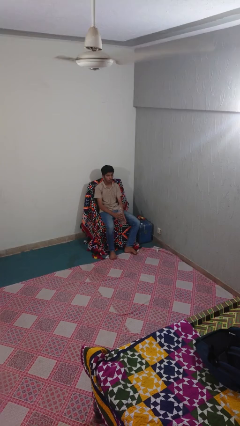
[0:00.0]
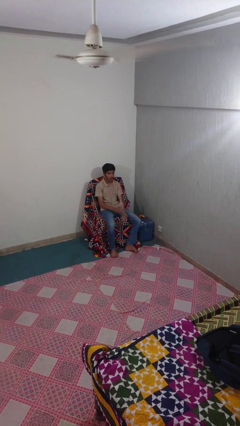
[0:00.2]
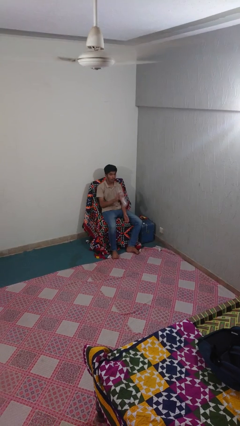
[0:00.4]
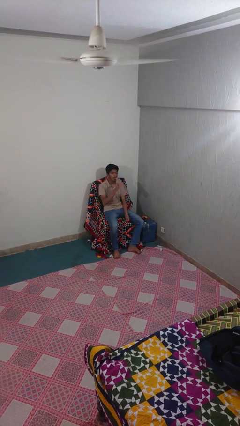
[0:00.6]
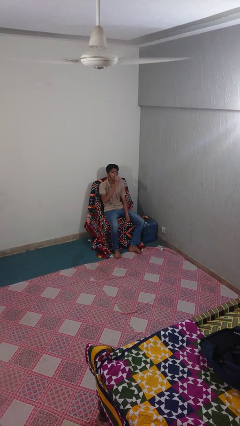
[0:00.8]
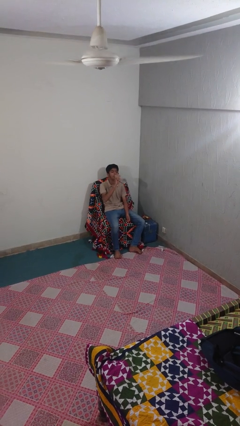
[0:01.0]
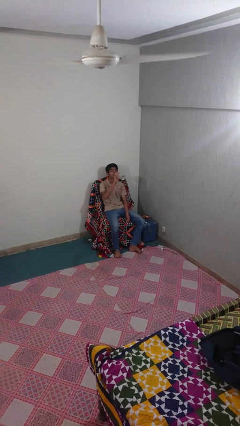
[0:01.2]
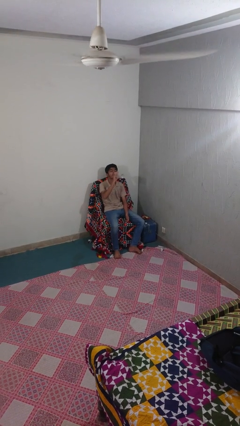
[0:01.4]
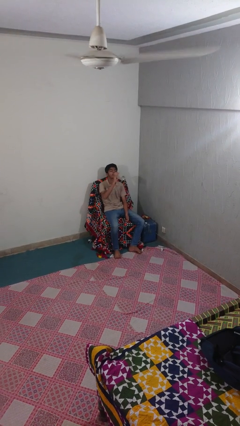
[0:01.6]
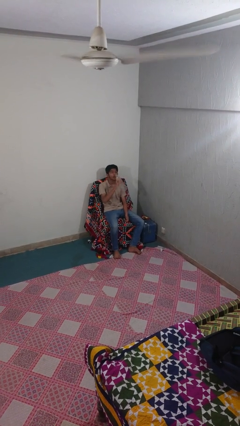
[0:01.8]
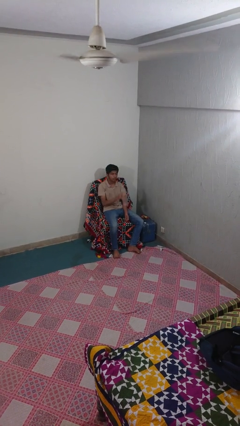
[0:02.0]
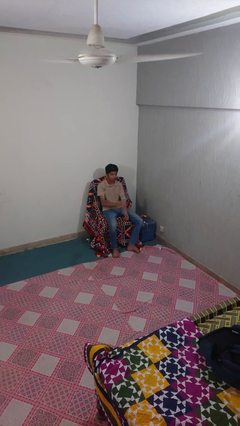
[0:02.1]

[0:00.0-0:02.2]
person drinks from bottle

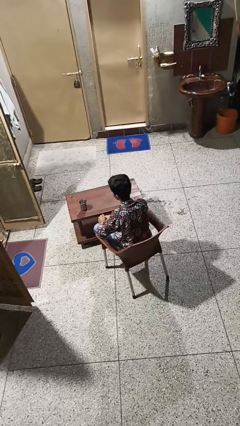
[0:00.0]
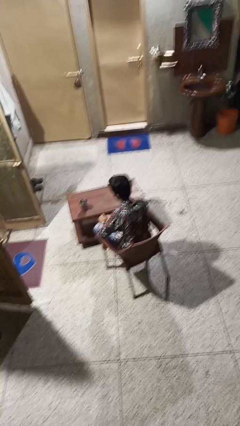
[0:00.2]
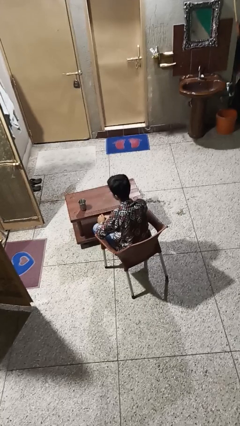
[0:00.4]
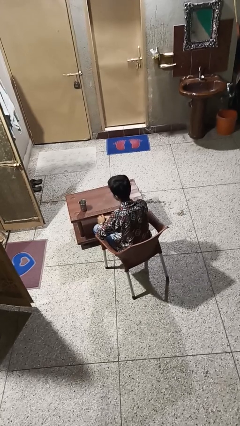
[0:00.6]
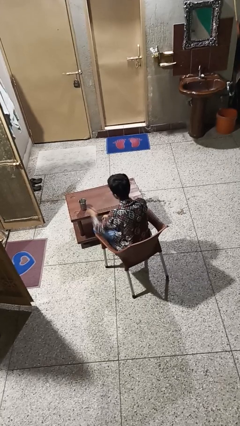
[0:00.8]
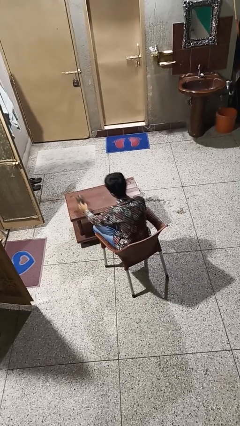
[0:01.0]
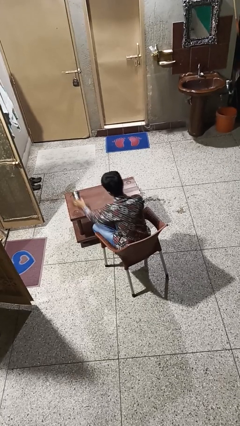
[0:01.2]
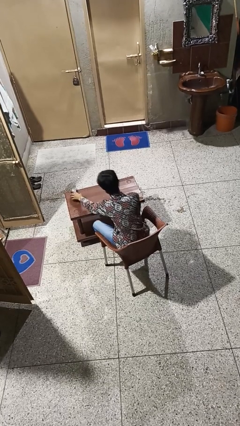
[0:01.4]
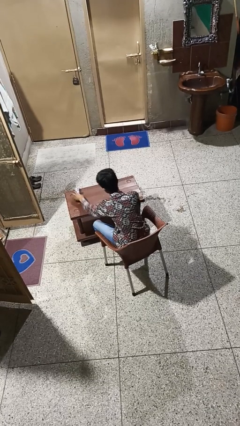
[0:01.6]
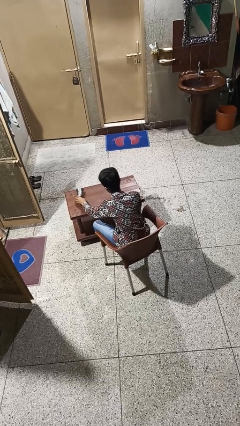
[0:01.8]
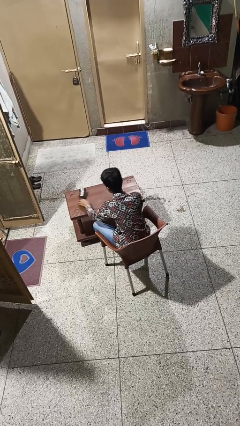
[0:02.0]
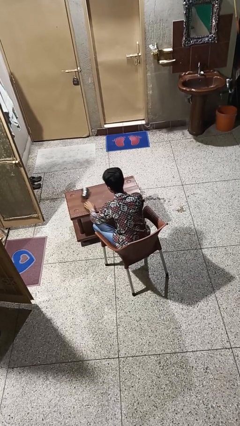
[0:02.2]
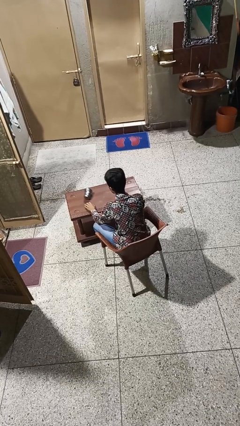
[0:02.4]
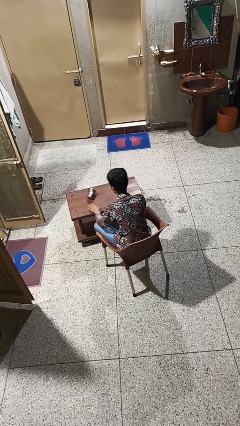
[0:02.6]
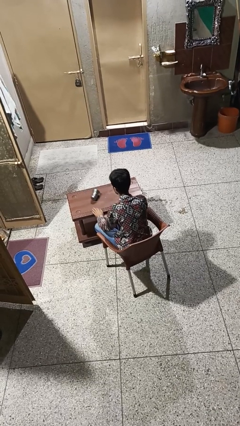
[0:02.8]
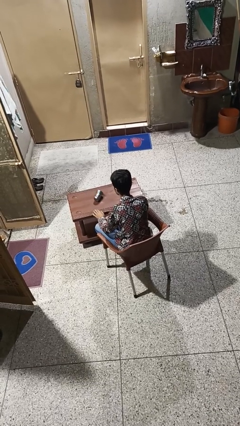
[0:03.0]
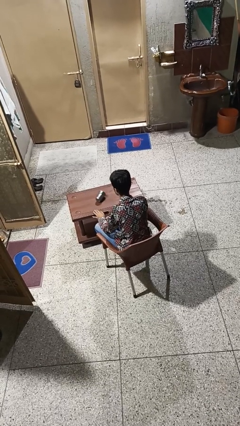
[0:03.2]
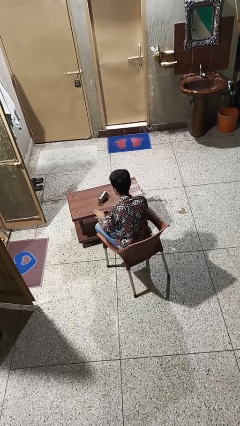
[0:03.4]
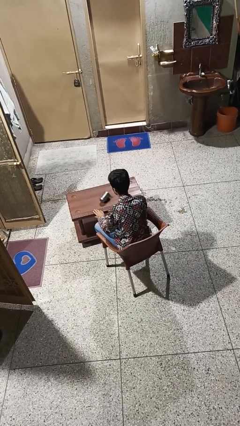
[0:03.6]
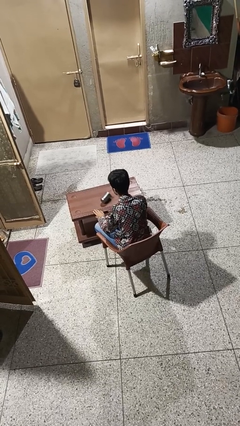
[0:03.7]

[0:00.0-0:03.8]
person knocks over glass

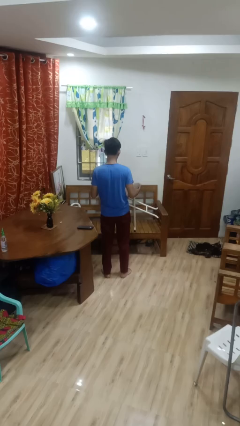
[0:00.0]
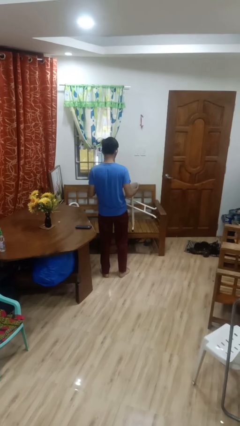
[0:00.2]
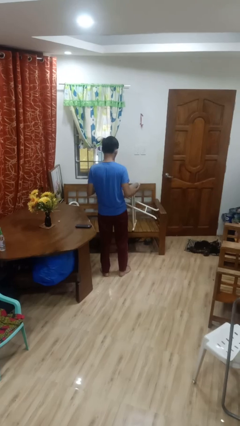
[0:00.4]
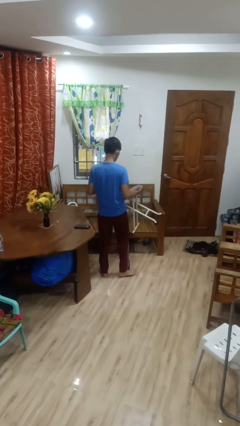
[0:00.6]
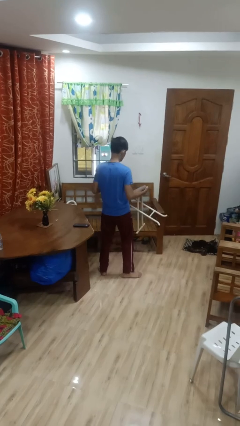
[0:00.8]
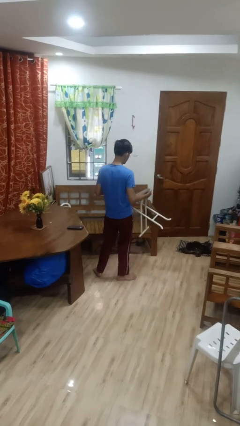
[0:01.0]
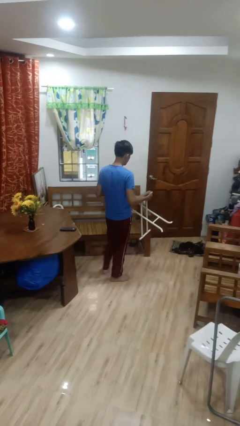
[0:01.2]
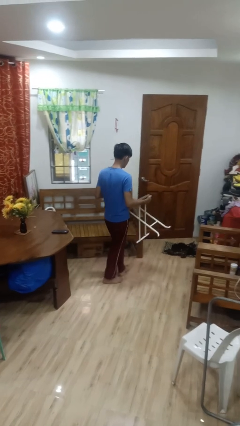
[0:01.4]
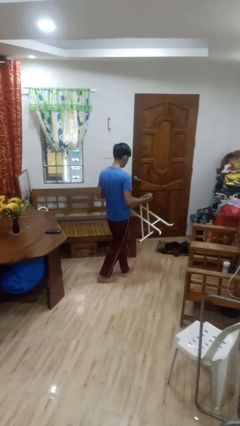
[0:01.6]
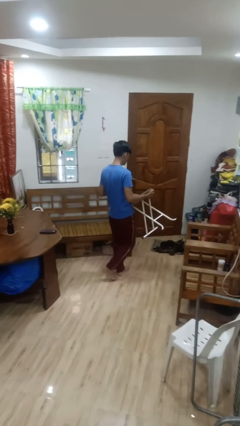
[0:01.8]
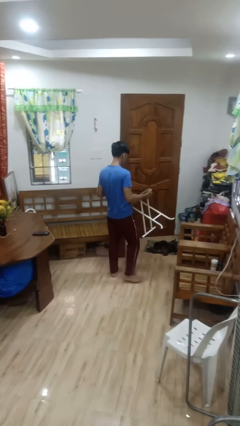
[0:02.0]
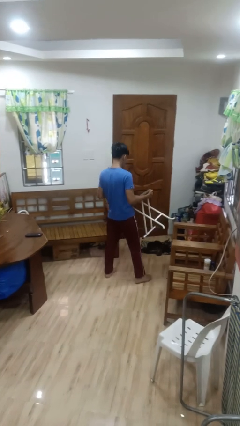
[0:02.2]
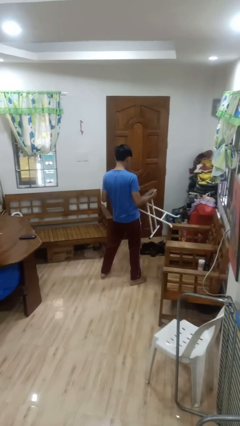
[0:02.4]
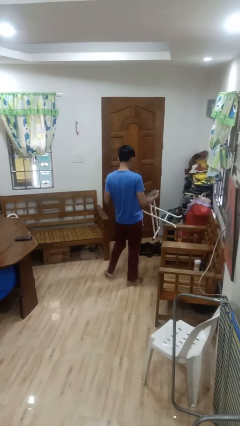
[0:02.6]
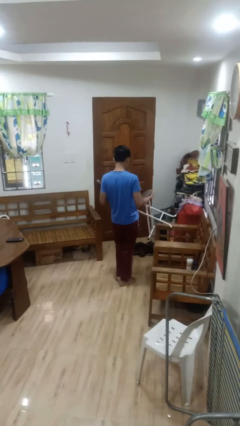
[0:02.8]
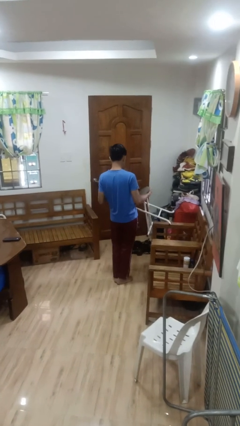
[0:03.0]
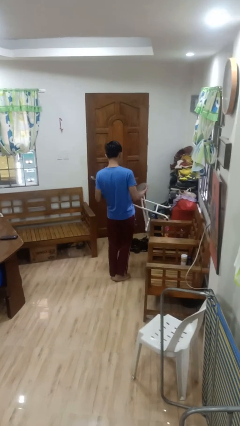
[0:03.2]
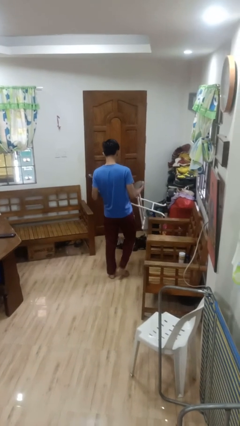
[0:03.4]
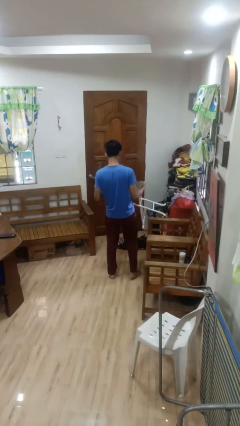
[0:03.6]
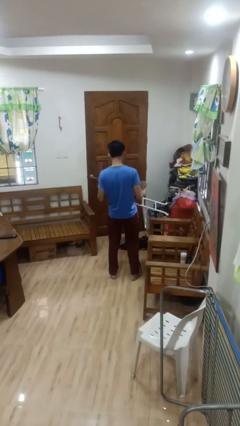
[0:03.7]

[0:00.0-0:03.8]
person carries furniture

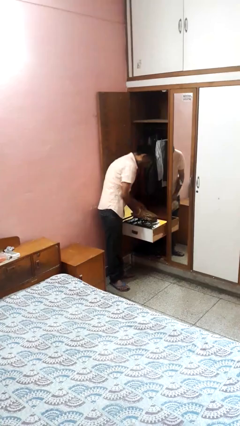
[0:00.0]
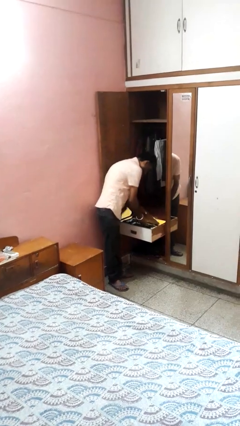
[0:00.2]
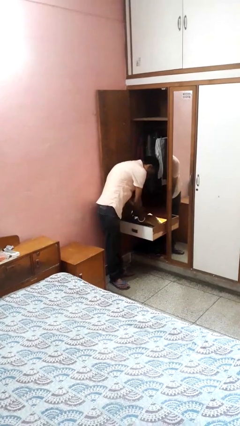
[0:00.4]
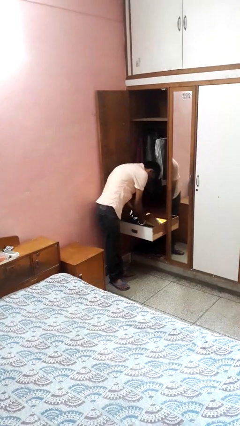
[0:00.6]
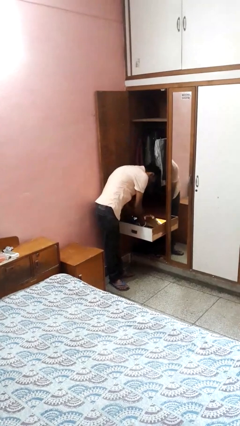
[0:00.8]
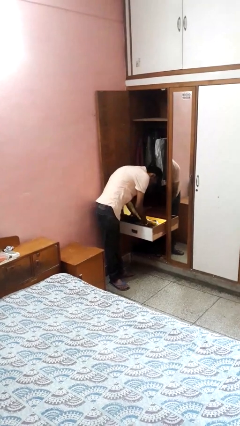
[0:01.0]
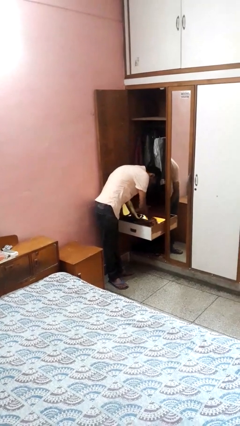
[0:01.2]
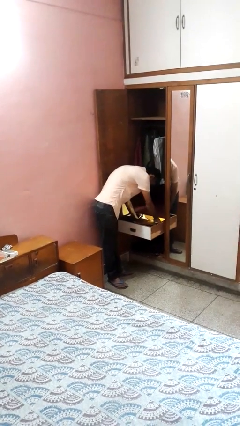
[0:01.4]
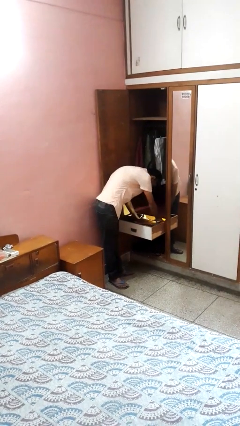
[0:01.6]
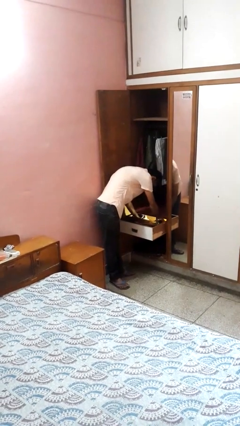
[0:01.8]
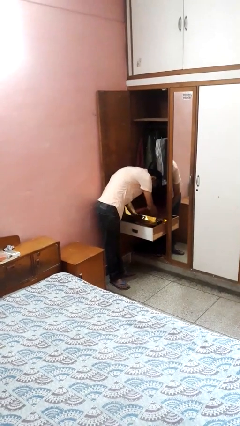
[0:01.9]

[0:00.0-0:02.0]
person puts clothes into dresser

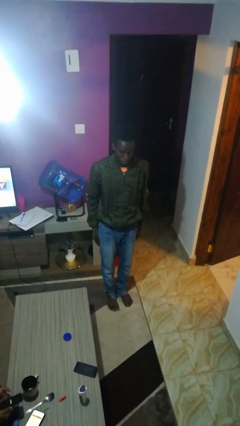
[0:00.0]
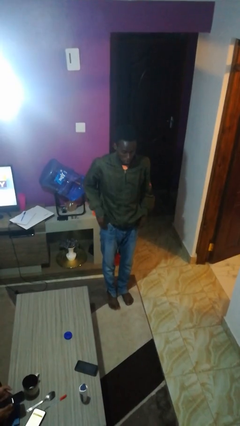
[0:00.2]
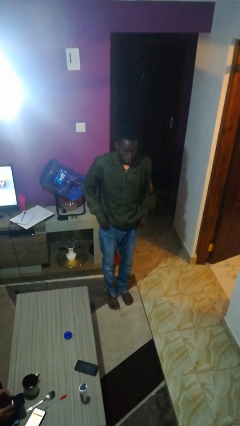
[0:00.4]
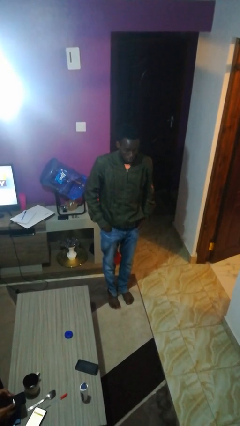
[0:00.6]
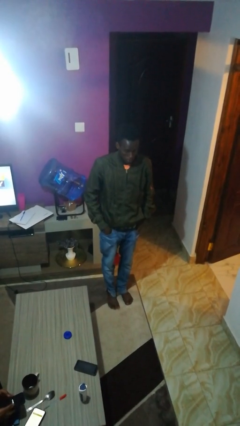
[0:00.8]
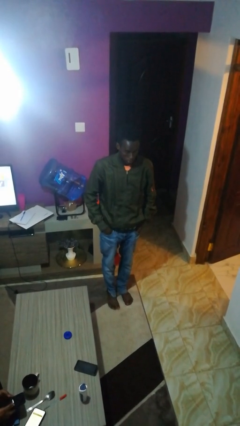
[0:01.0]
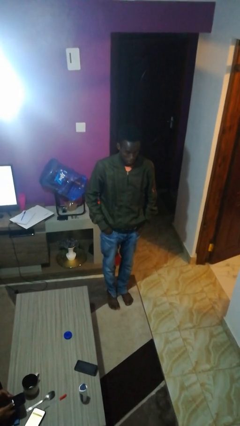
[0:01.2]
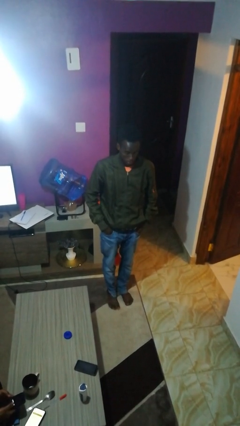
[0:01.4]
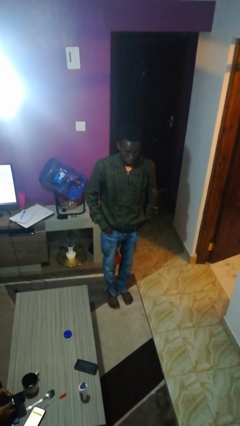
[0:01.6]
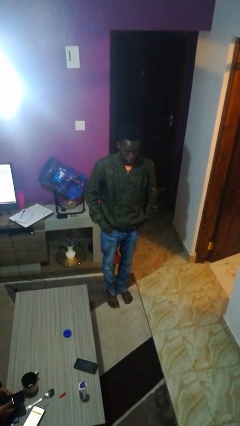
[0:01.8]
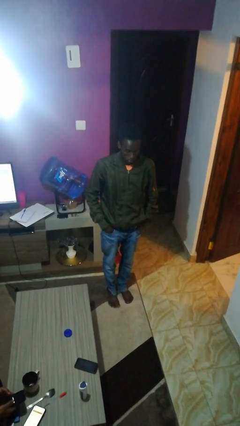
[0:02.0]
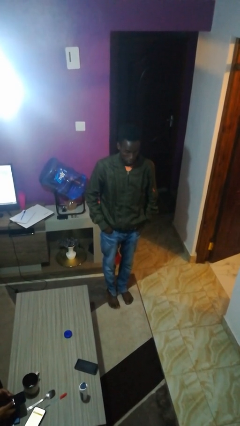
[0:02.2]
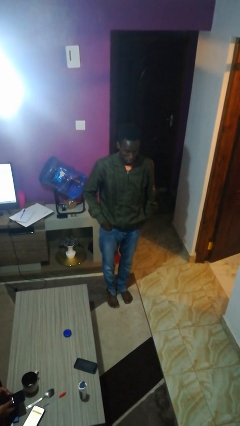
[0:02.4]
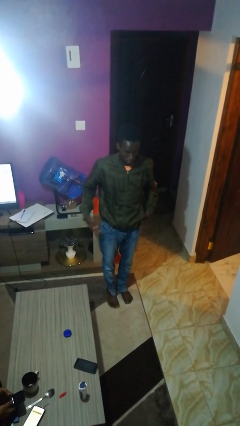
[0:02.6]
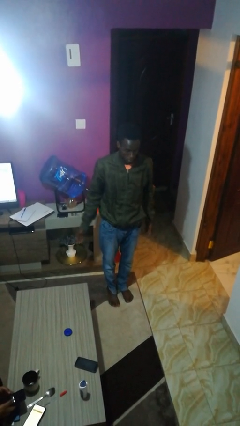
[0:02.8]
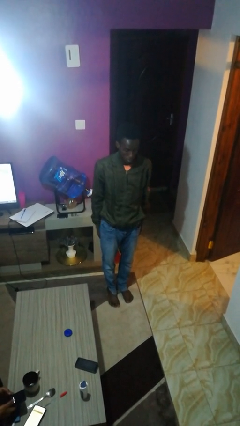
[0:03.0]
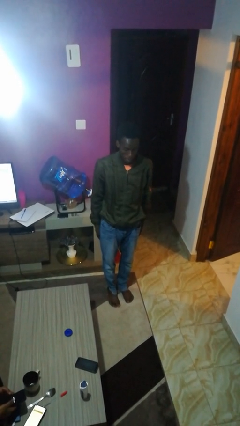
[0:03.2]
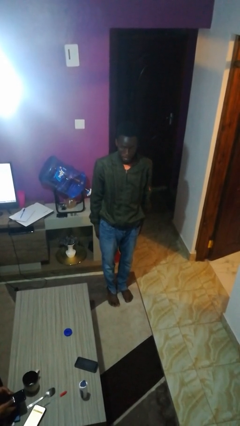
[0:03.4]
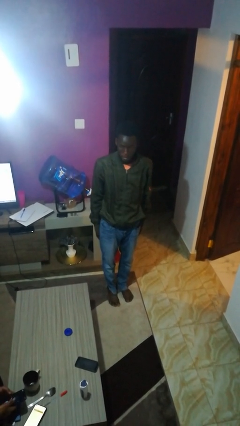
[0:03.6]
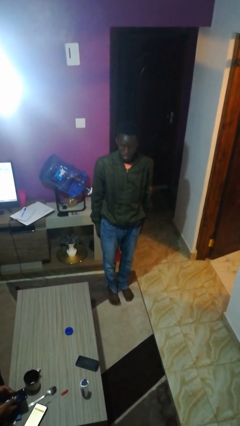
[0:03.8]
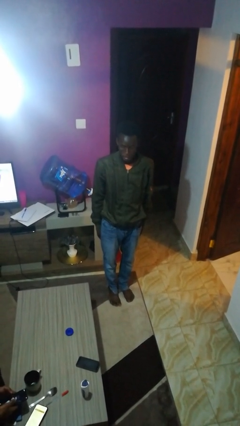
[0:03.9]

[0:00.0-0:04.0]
person puts hands in back pockets

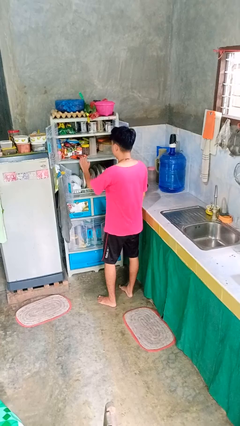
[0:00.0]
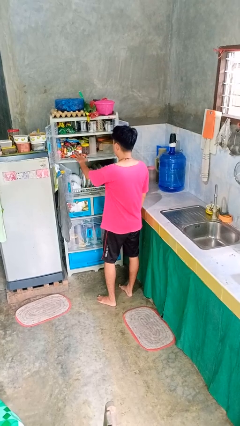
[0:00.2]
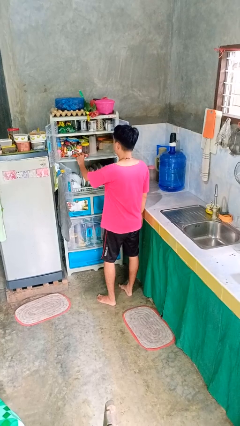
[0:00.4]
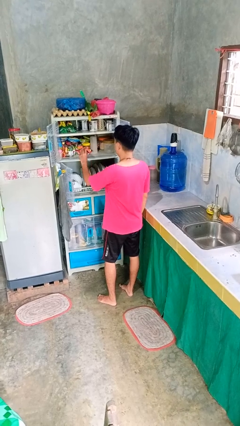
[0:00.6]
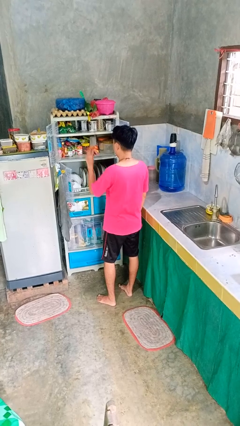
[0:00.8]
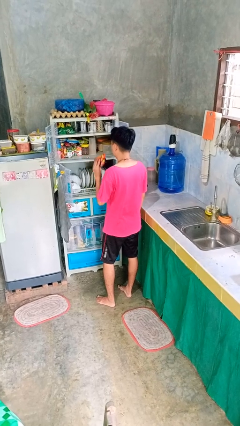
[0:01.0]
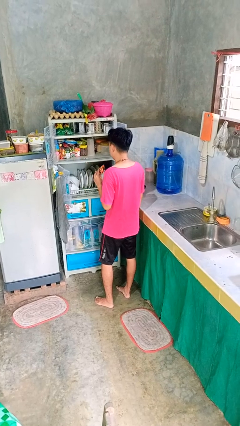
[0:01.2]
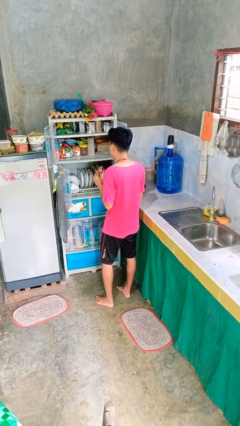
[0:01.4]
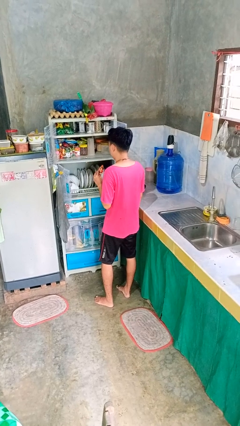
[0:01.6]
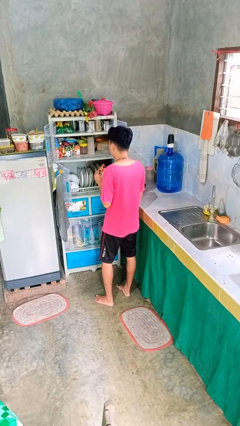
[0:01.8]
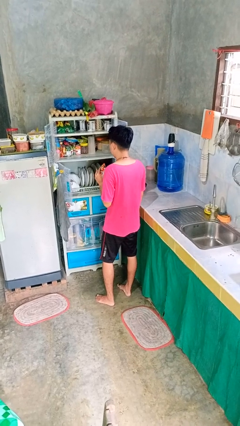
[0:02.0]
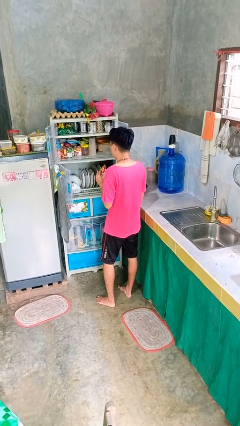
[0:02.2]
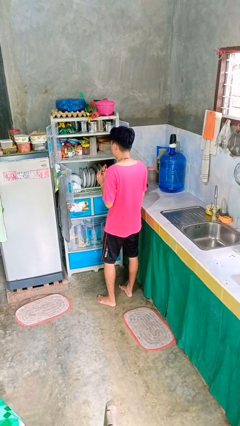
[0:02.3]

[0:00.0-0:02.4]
person takes object from cabinet
